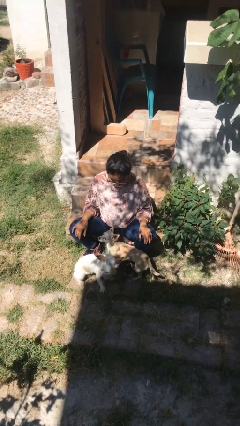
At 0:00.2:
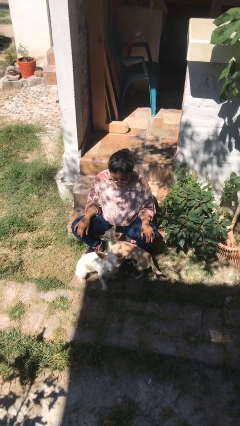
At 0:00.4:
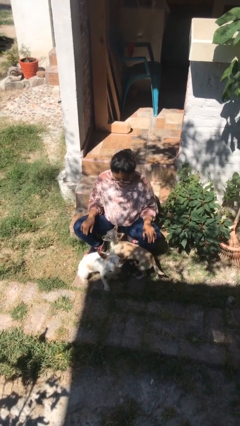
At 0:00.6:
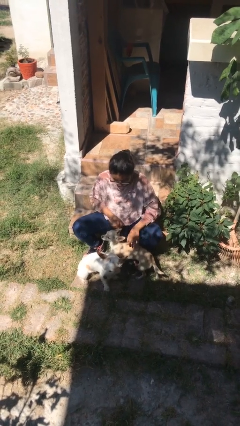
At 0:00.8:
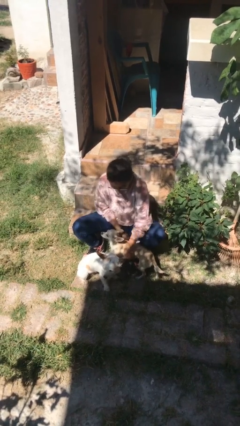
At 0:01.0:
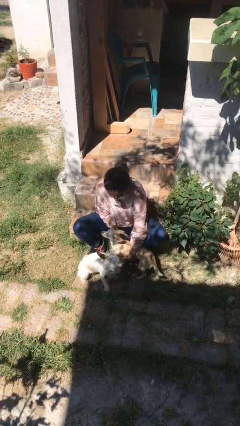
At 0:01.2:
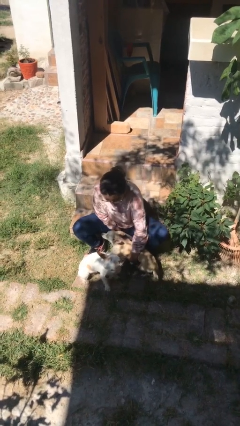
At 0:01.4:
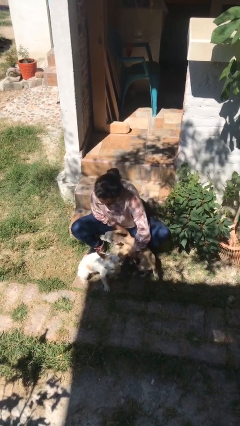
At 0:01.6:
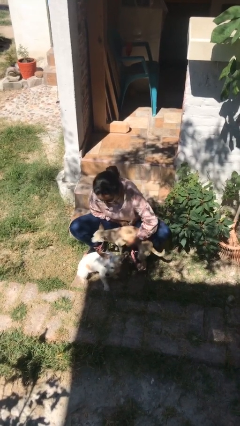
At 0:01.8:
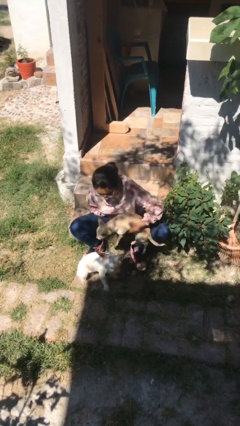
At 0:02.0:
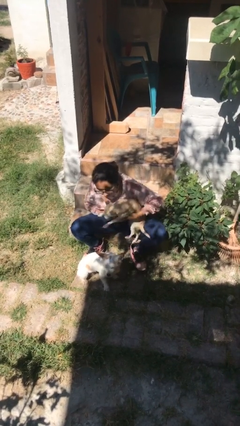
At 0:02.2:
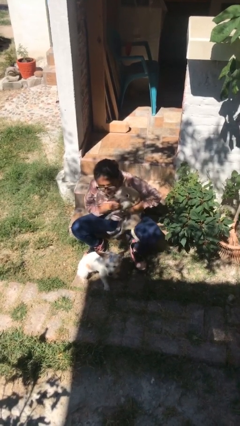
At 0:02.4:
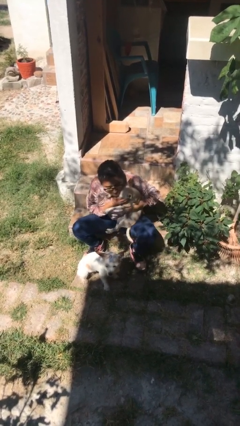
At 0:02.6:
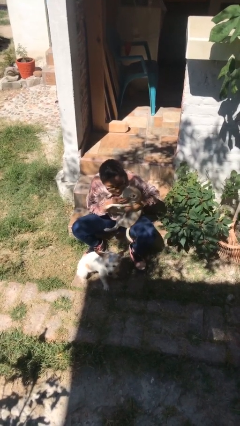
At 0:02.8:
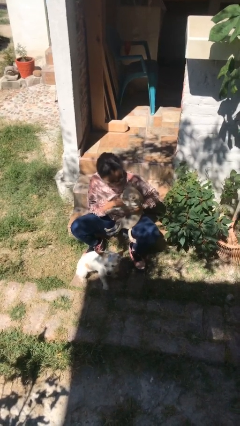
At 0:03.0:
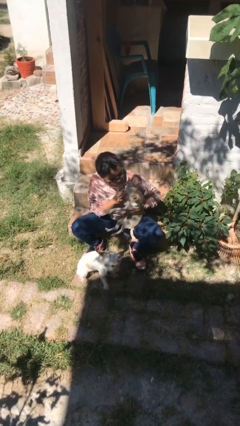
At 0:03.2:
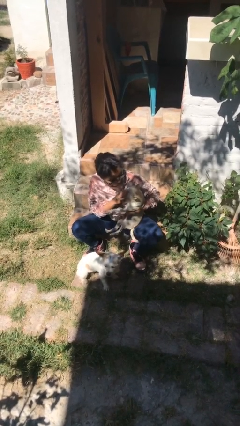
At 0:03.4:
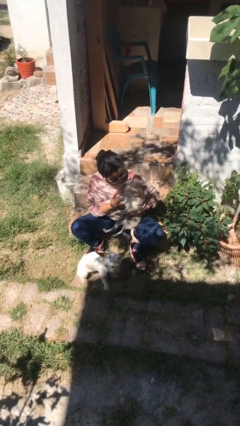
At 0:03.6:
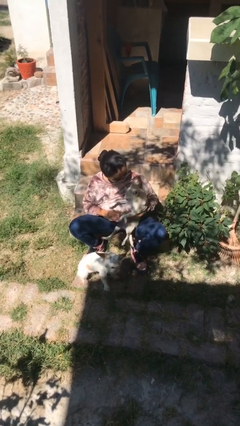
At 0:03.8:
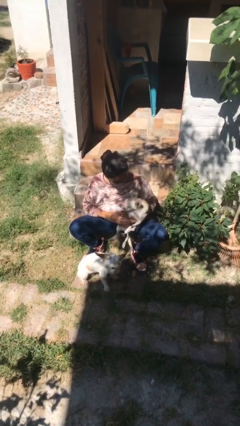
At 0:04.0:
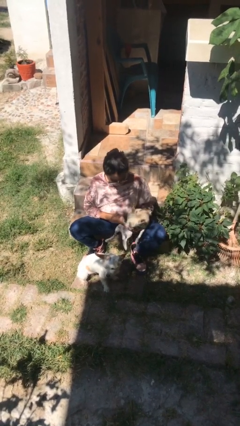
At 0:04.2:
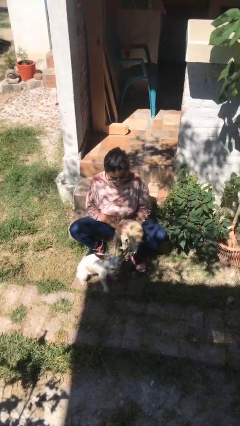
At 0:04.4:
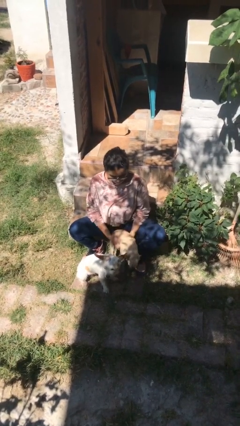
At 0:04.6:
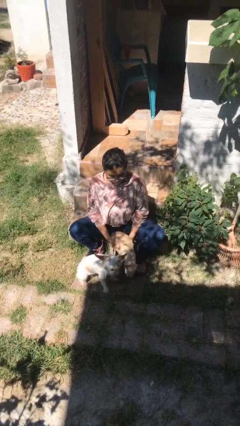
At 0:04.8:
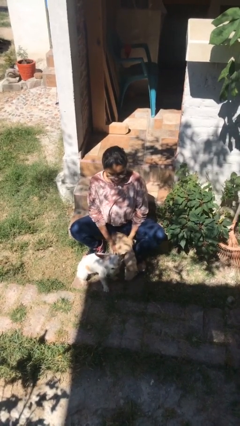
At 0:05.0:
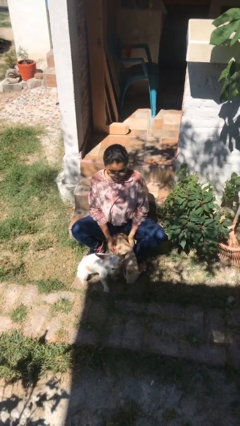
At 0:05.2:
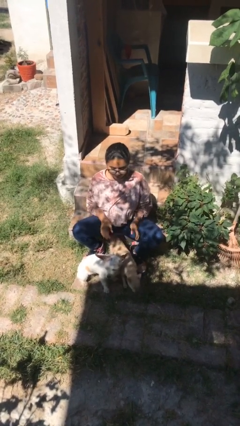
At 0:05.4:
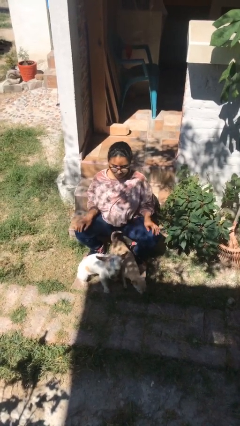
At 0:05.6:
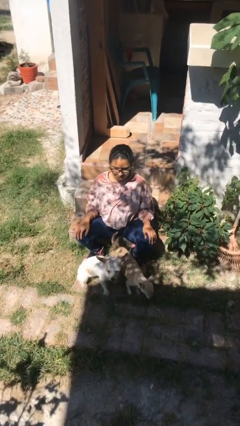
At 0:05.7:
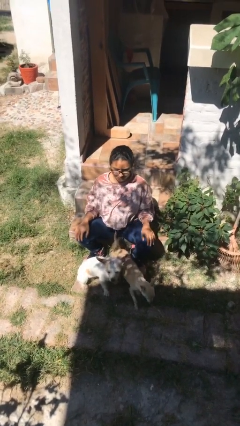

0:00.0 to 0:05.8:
person hugs dog

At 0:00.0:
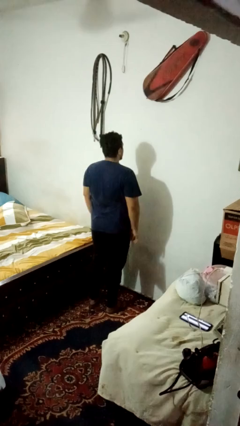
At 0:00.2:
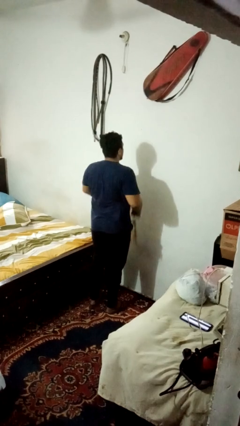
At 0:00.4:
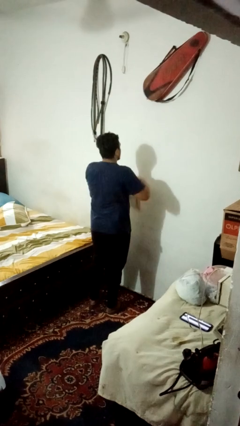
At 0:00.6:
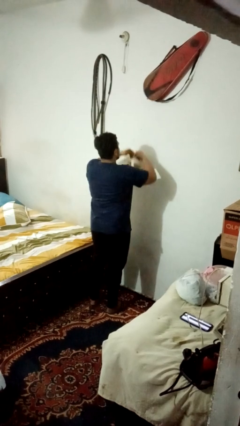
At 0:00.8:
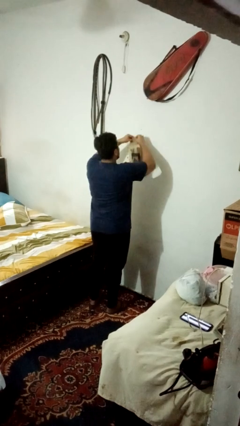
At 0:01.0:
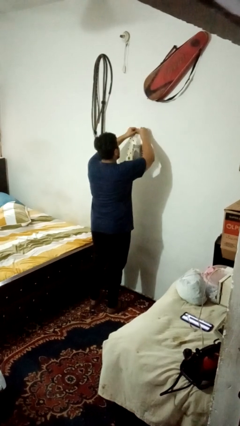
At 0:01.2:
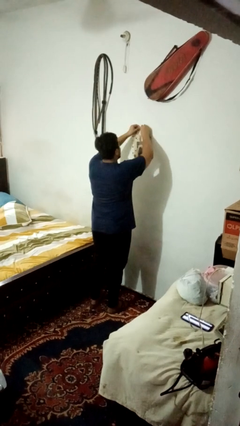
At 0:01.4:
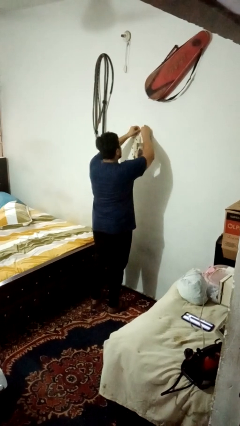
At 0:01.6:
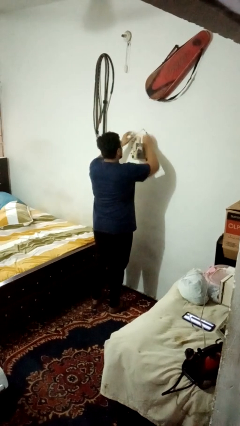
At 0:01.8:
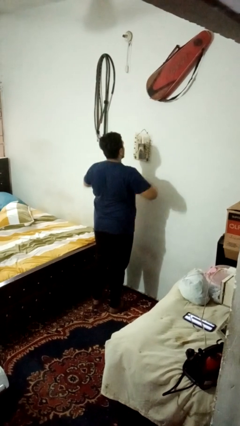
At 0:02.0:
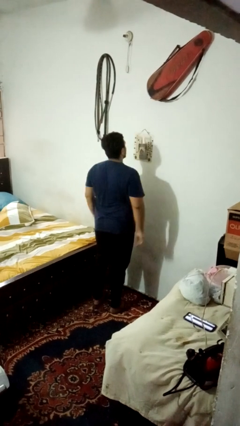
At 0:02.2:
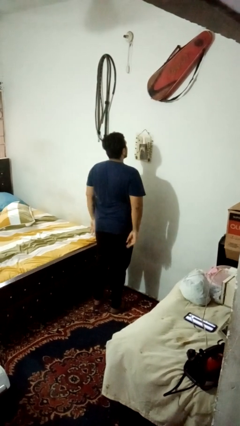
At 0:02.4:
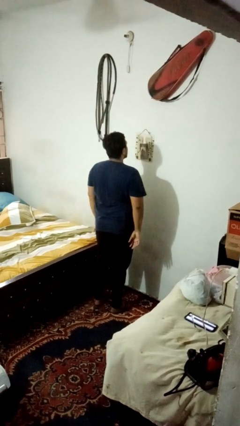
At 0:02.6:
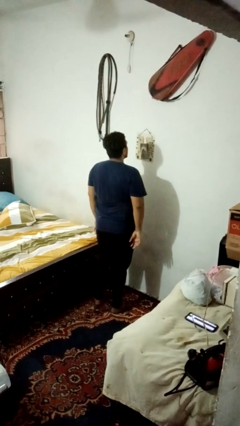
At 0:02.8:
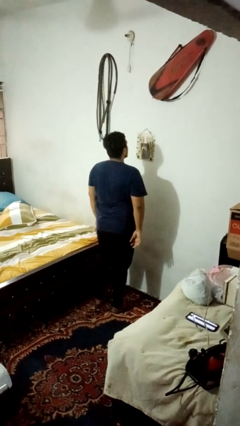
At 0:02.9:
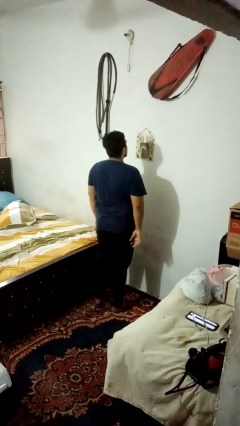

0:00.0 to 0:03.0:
person puts up picture frame

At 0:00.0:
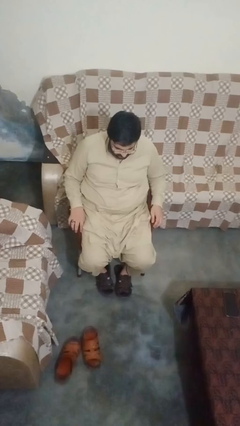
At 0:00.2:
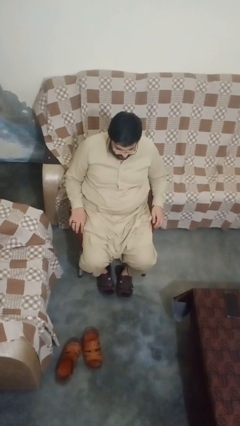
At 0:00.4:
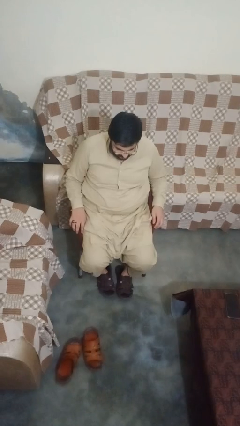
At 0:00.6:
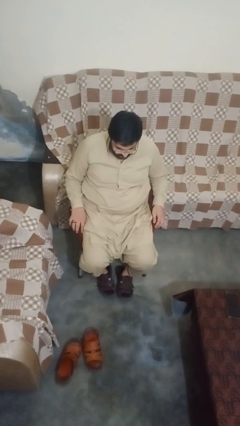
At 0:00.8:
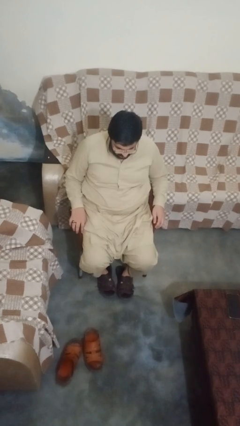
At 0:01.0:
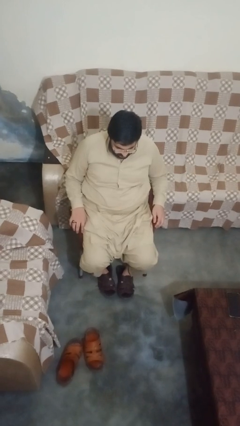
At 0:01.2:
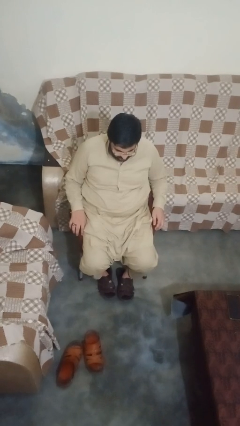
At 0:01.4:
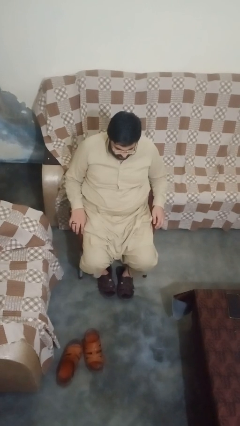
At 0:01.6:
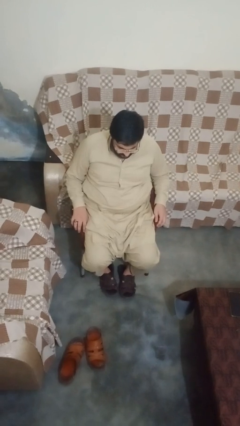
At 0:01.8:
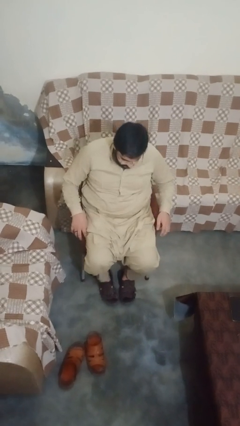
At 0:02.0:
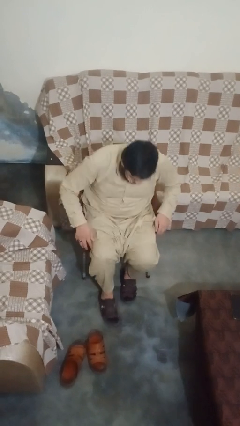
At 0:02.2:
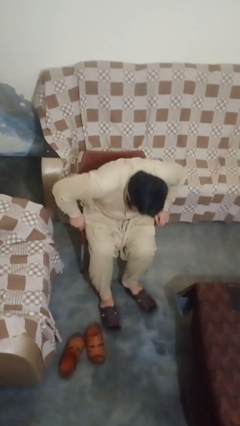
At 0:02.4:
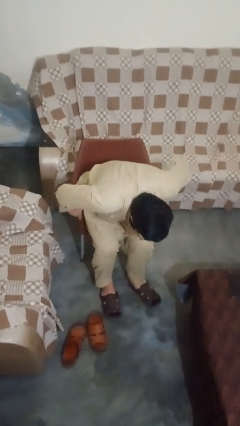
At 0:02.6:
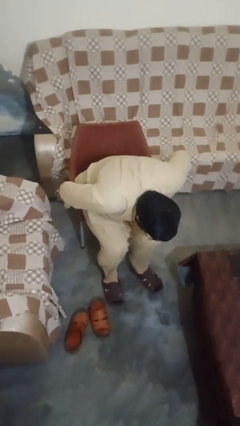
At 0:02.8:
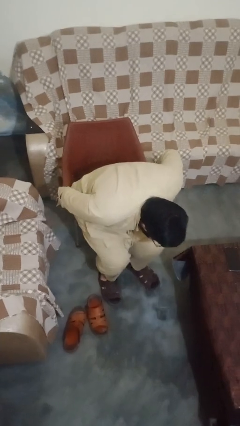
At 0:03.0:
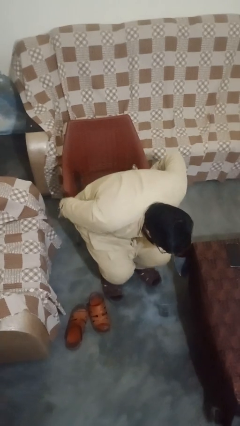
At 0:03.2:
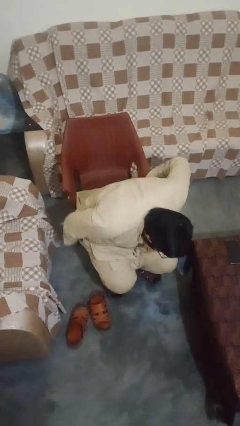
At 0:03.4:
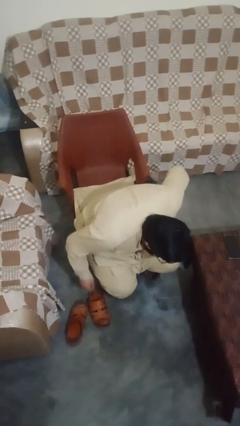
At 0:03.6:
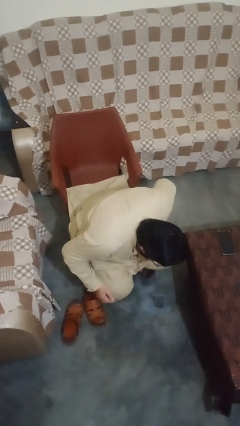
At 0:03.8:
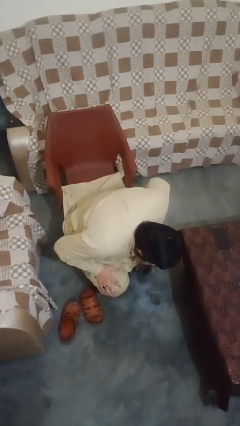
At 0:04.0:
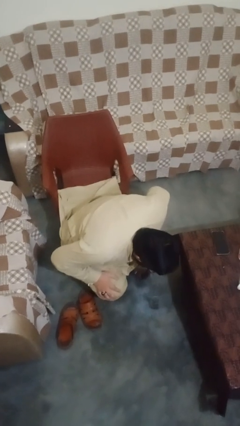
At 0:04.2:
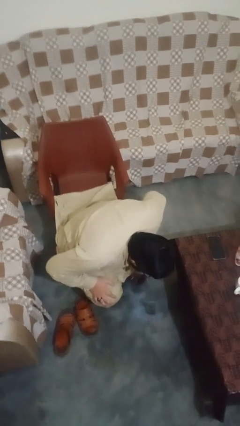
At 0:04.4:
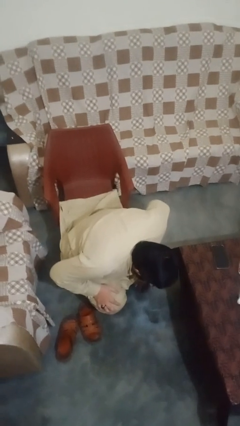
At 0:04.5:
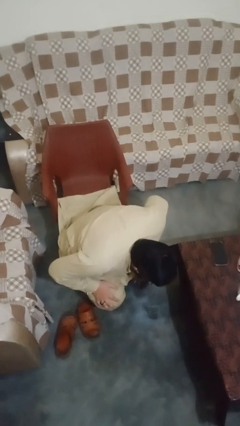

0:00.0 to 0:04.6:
person falls from chair

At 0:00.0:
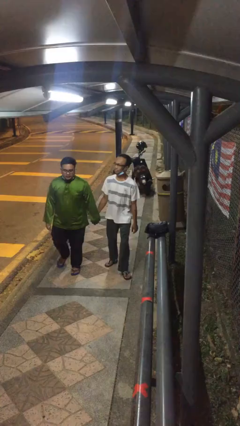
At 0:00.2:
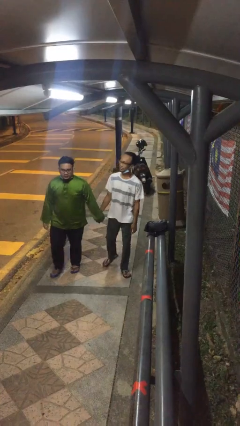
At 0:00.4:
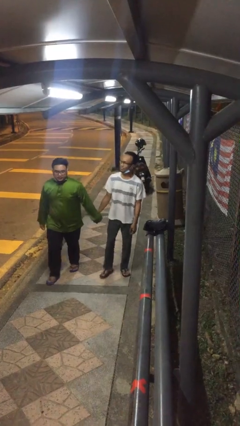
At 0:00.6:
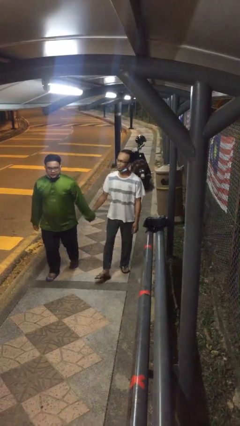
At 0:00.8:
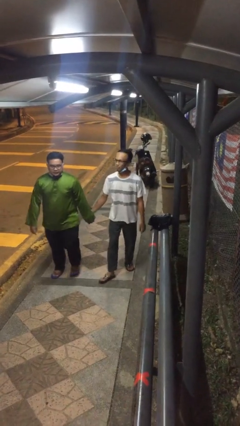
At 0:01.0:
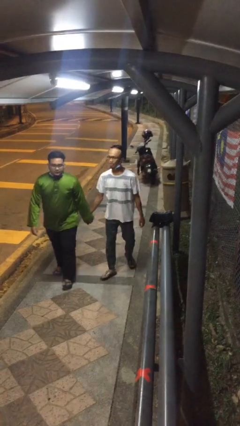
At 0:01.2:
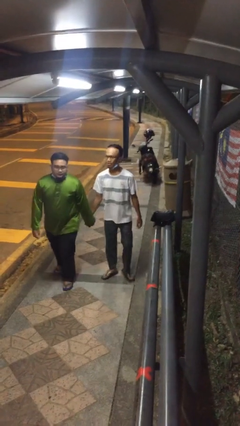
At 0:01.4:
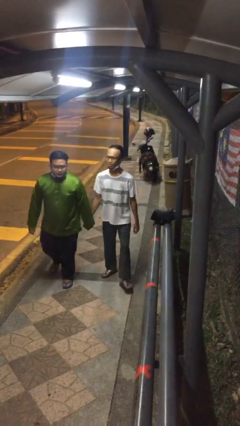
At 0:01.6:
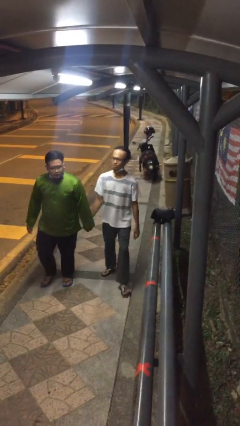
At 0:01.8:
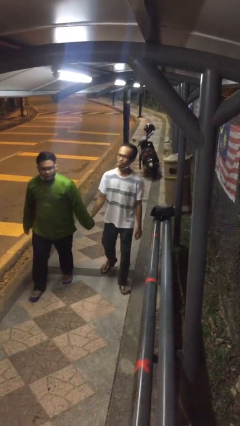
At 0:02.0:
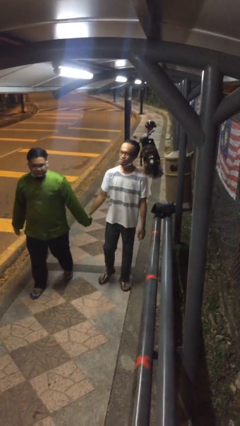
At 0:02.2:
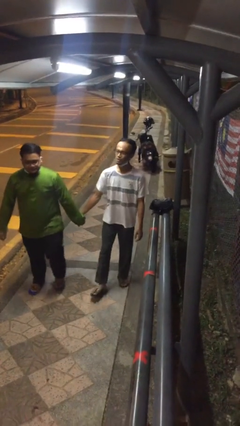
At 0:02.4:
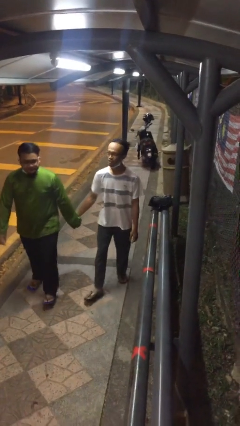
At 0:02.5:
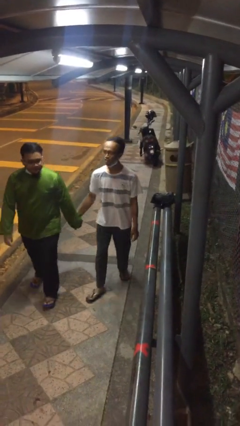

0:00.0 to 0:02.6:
person holds hand

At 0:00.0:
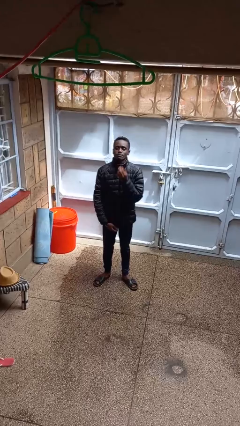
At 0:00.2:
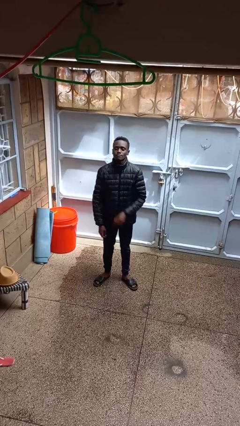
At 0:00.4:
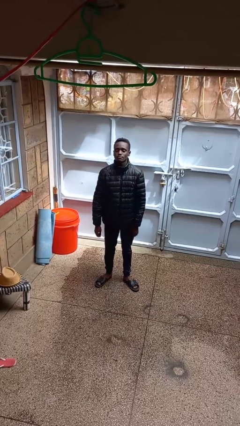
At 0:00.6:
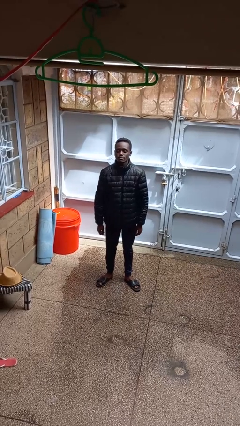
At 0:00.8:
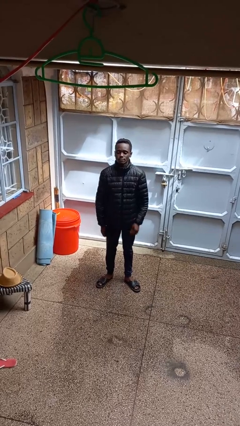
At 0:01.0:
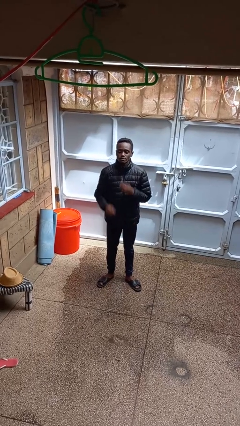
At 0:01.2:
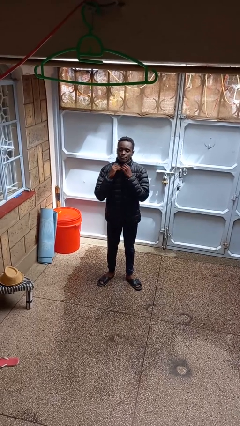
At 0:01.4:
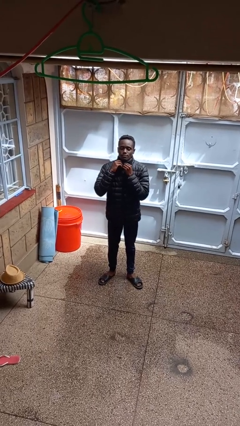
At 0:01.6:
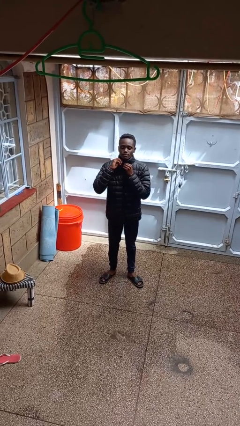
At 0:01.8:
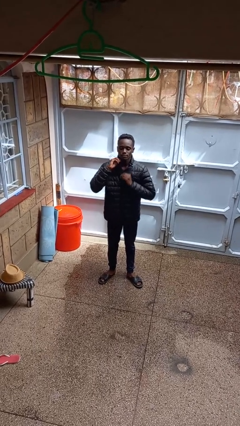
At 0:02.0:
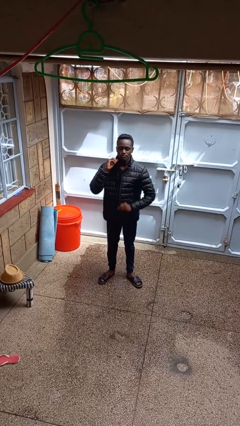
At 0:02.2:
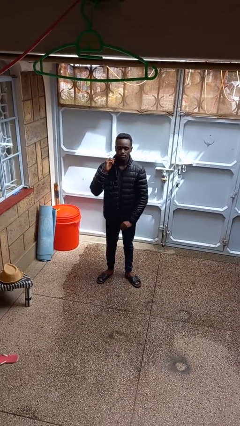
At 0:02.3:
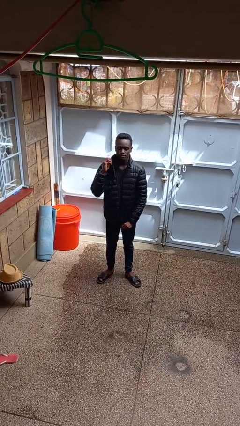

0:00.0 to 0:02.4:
person unzips jacket
